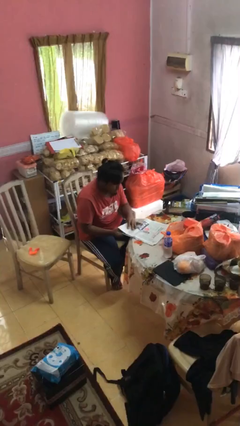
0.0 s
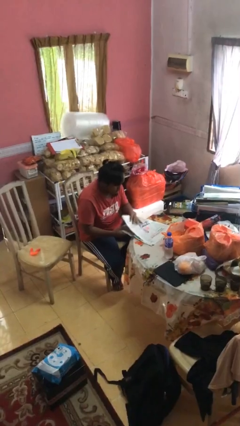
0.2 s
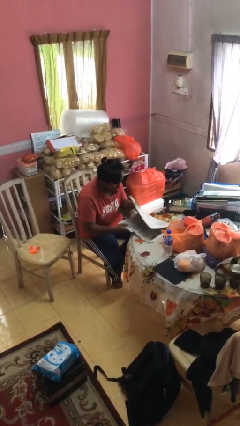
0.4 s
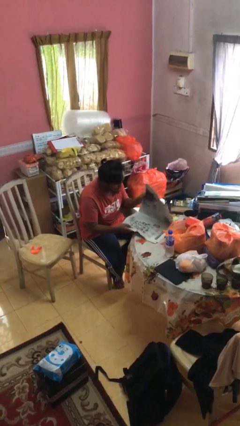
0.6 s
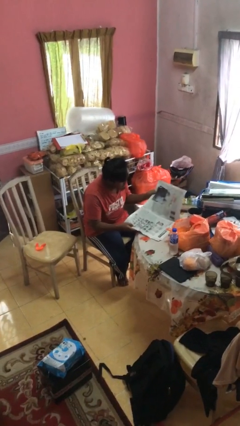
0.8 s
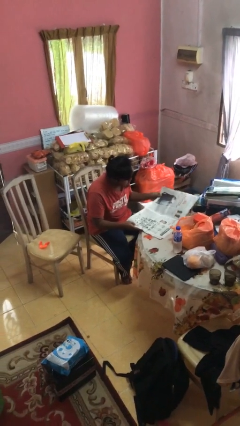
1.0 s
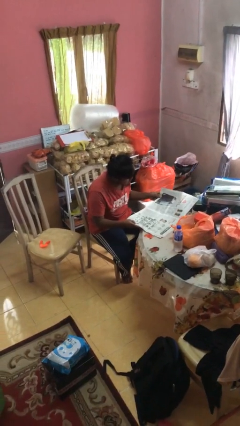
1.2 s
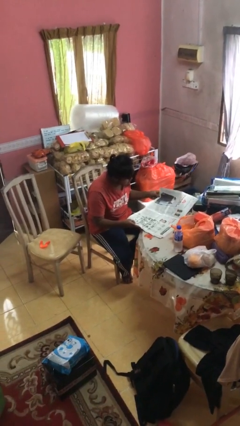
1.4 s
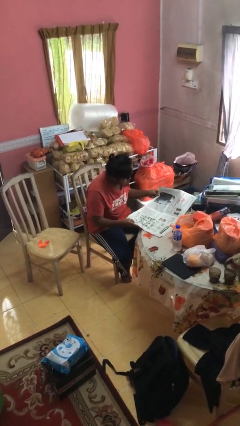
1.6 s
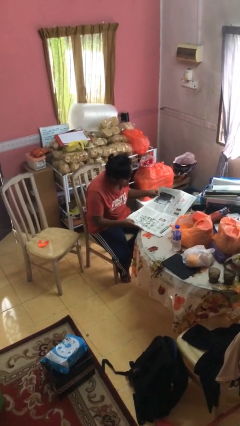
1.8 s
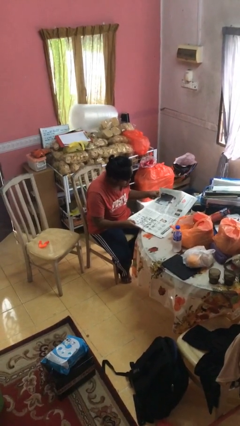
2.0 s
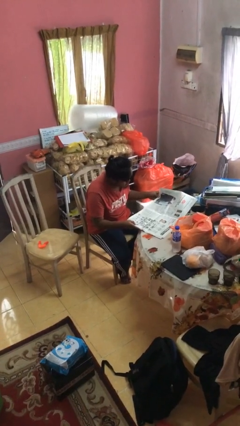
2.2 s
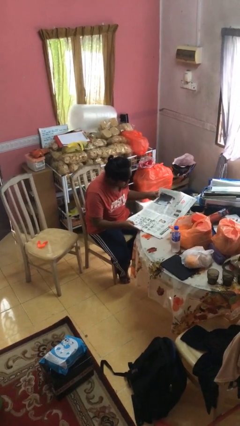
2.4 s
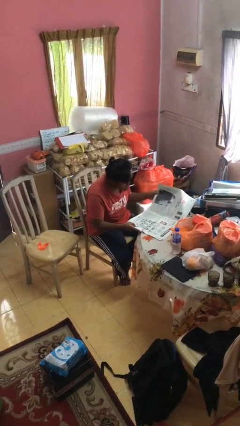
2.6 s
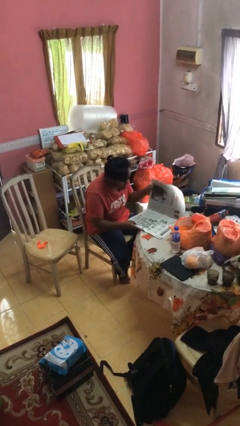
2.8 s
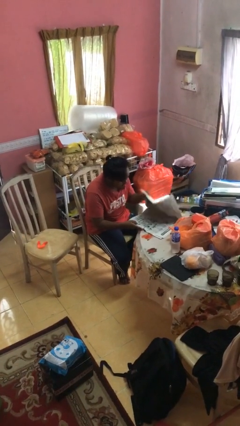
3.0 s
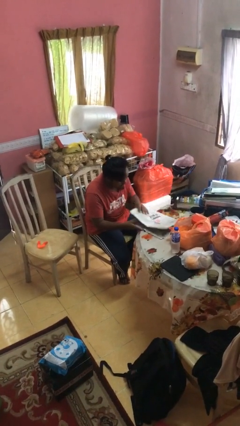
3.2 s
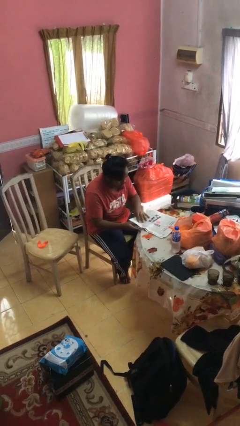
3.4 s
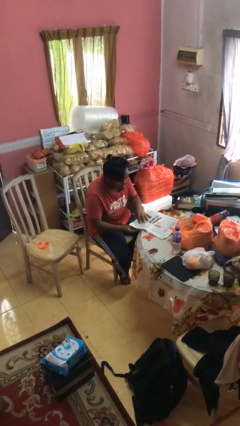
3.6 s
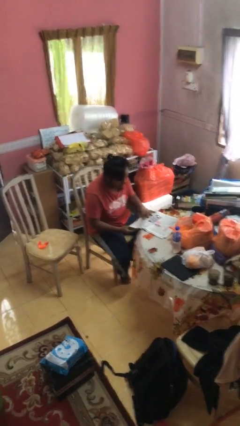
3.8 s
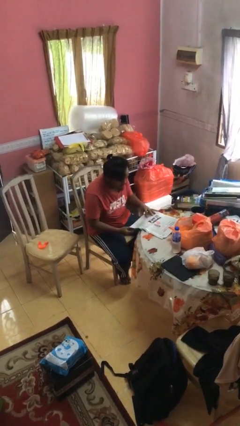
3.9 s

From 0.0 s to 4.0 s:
person reads newspaper

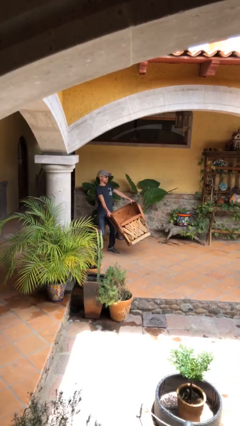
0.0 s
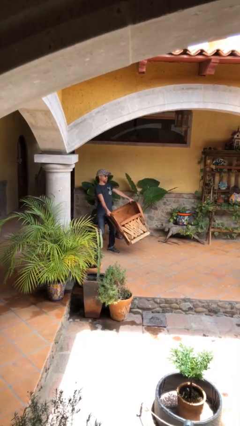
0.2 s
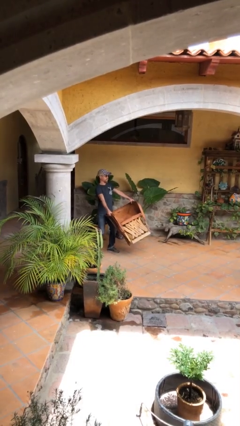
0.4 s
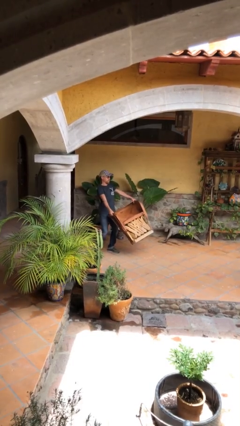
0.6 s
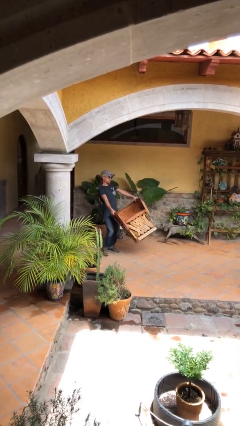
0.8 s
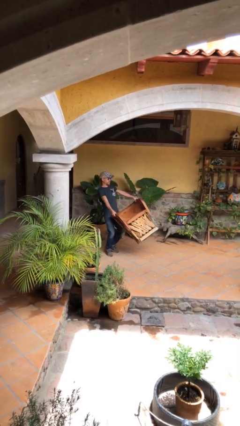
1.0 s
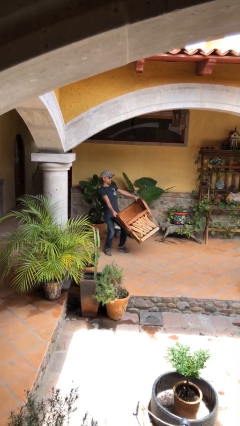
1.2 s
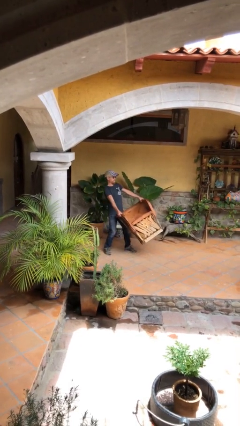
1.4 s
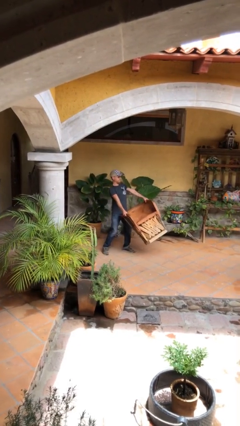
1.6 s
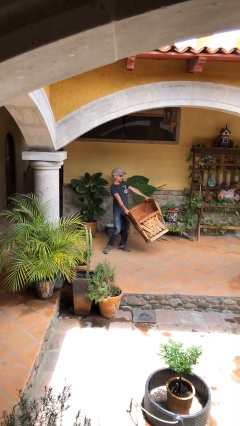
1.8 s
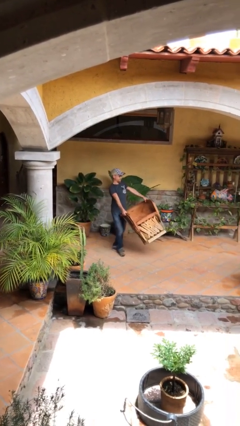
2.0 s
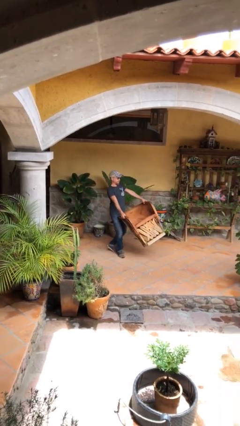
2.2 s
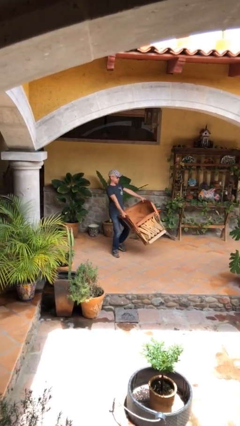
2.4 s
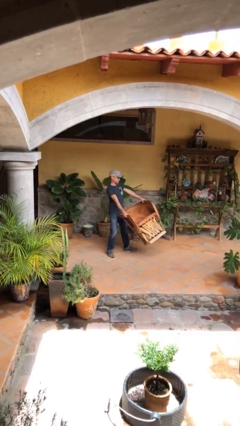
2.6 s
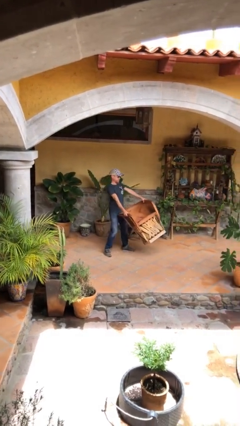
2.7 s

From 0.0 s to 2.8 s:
person carries heavy object

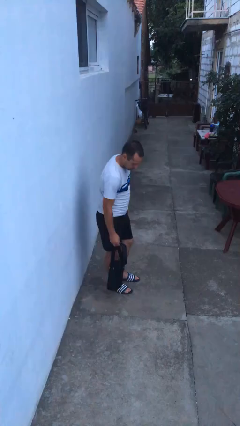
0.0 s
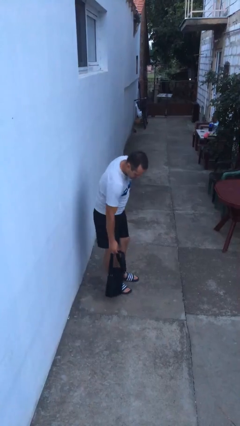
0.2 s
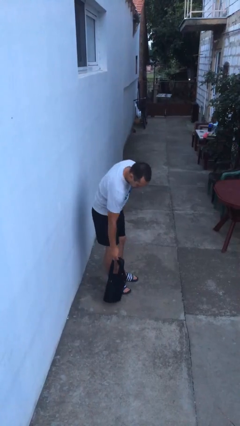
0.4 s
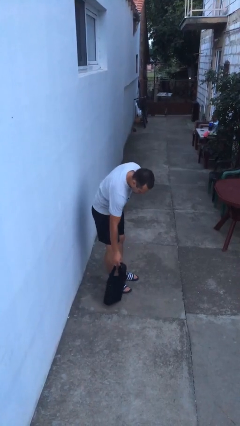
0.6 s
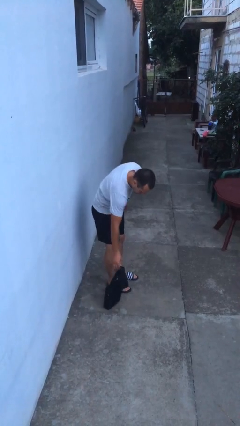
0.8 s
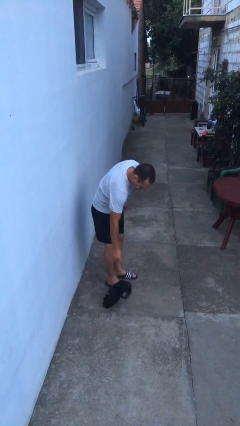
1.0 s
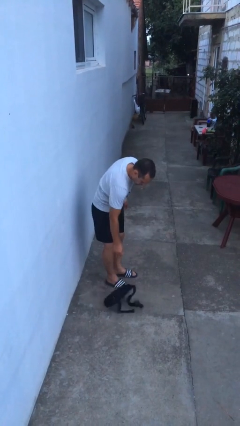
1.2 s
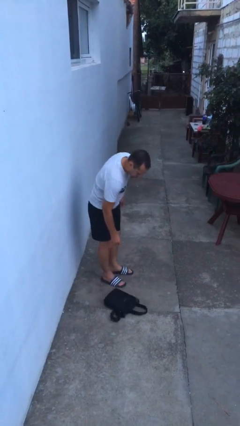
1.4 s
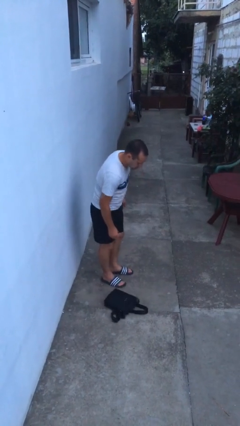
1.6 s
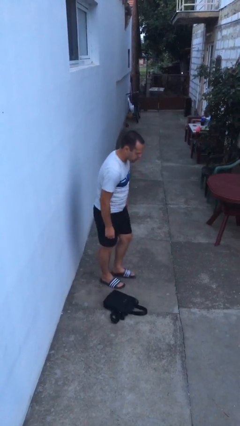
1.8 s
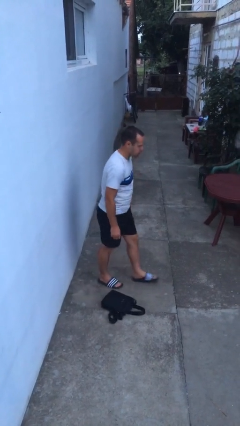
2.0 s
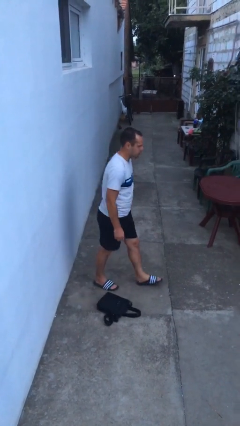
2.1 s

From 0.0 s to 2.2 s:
person puts down object on floor

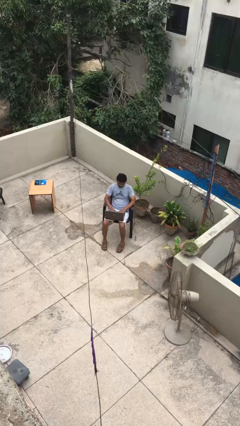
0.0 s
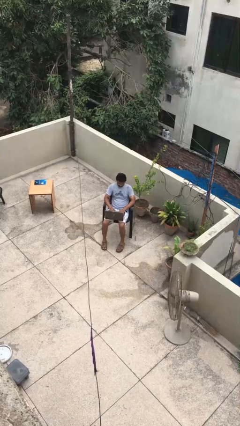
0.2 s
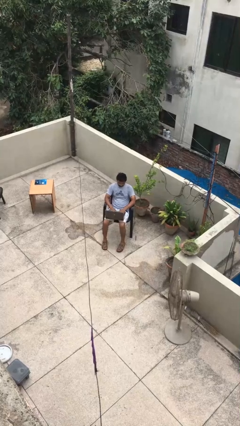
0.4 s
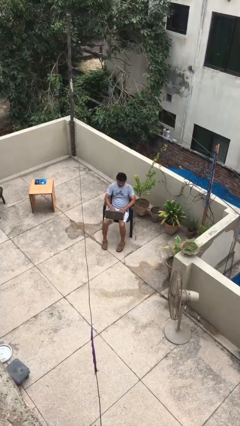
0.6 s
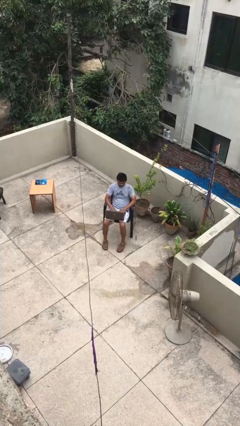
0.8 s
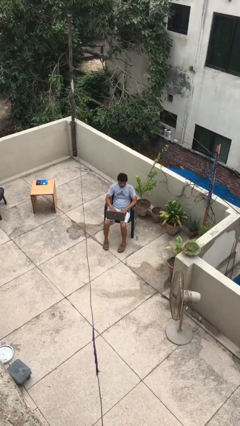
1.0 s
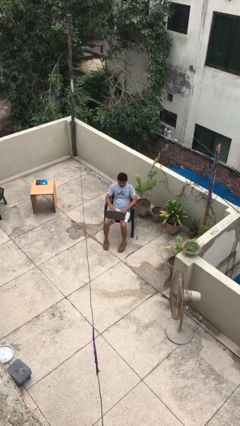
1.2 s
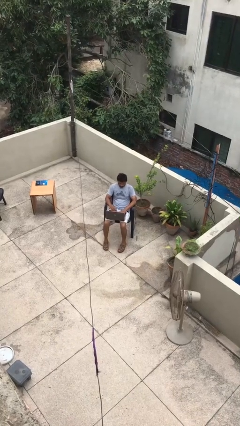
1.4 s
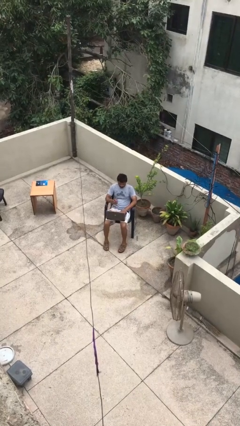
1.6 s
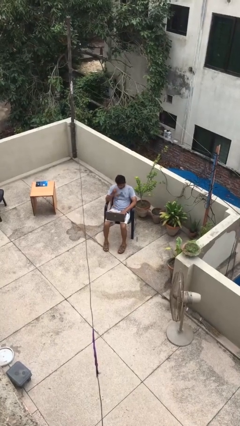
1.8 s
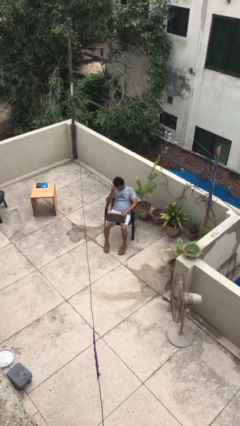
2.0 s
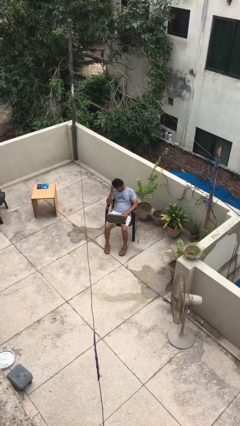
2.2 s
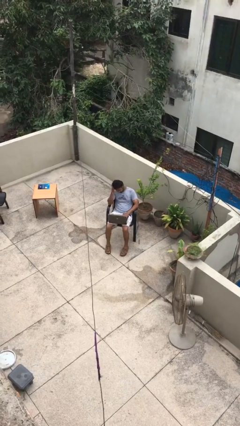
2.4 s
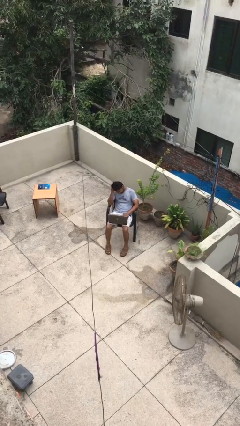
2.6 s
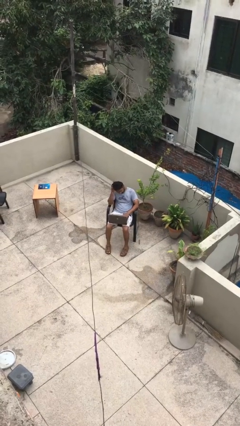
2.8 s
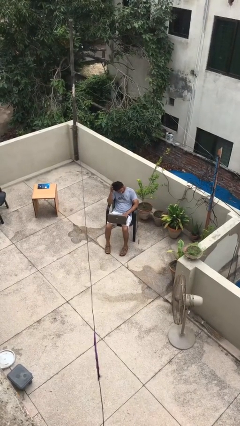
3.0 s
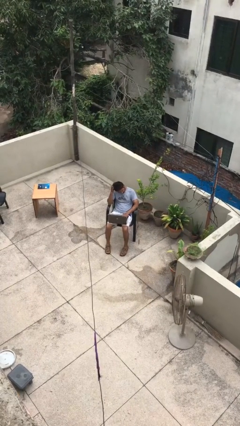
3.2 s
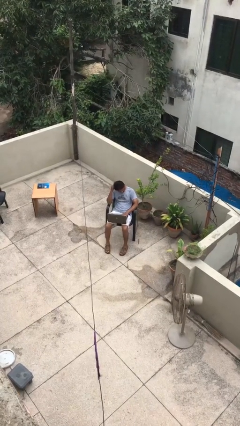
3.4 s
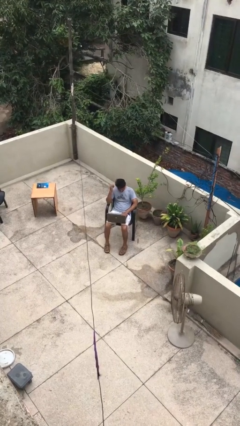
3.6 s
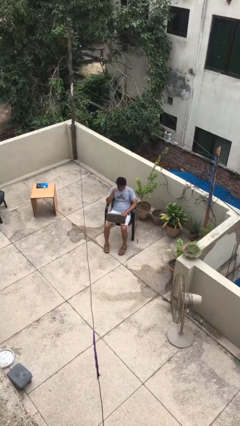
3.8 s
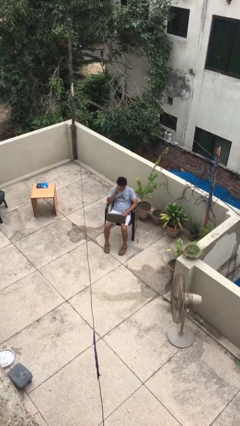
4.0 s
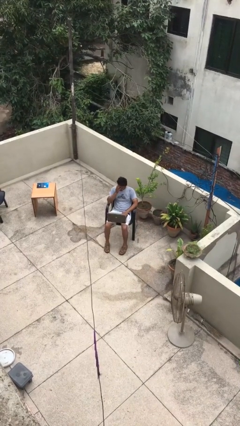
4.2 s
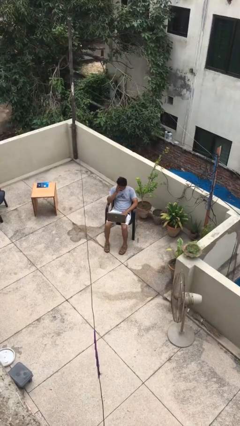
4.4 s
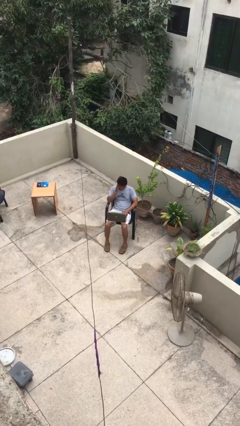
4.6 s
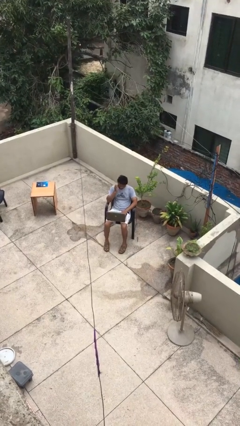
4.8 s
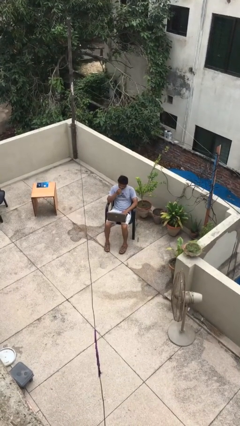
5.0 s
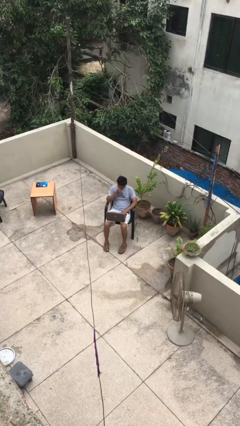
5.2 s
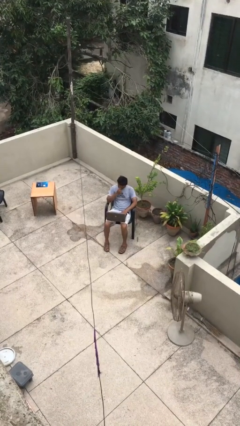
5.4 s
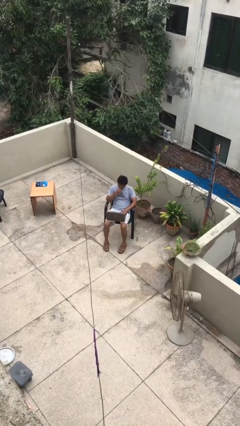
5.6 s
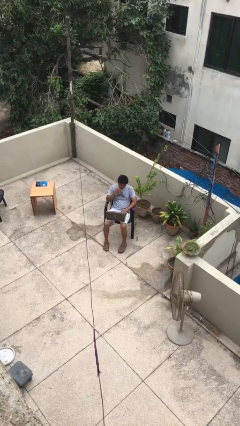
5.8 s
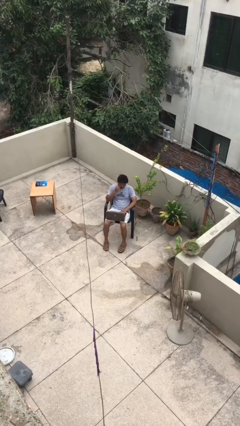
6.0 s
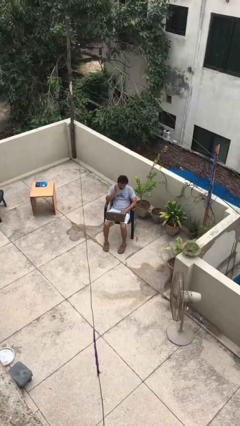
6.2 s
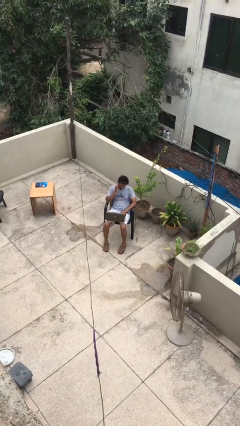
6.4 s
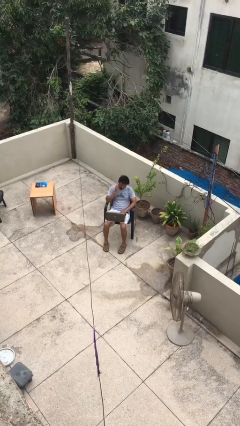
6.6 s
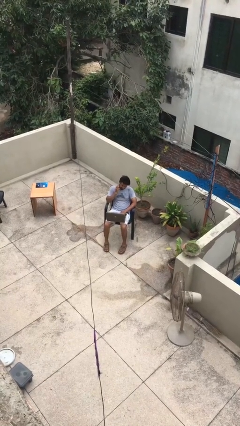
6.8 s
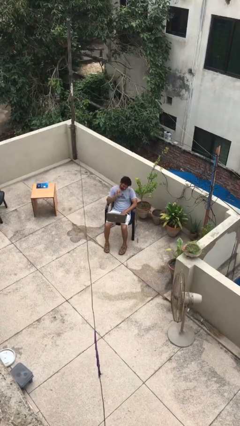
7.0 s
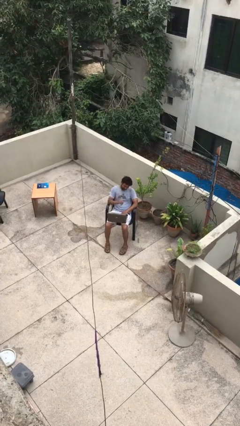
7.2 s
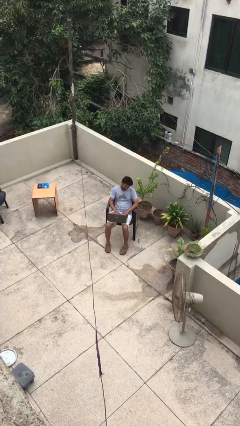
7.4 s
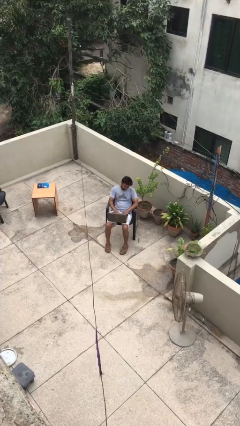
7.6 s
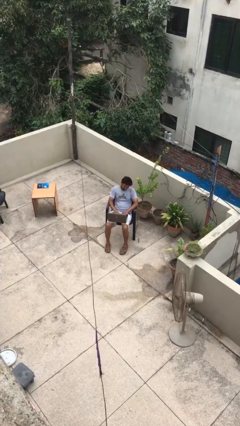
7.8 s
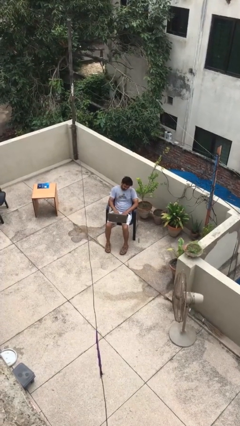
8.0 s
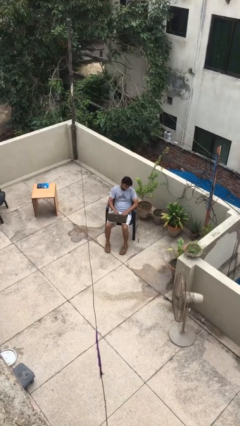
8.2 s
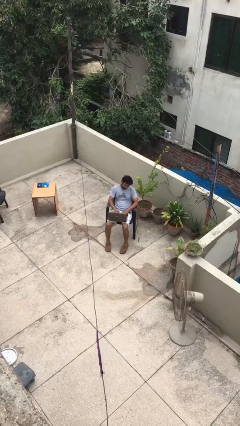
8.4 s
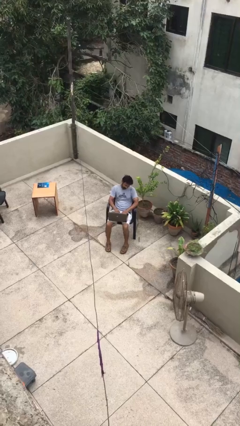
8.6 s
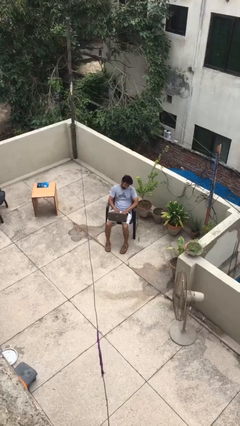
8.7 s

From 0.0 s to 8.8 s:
person interacts with laptop
